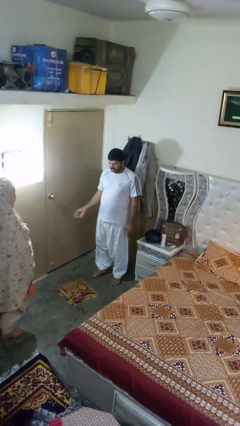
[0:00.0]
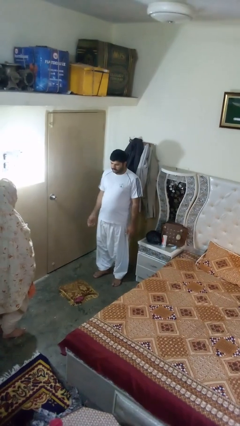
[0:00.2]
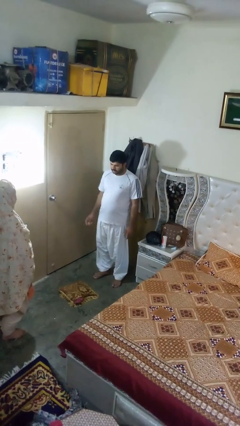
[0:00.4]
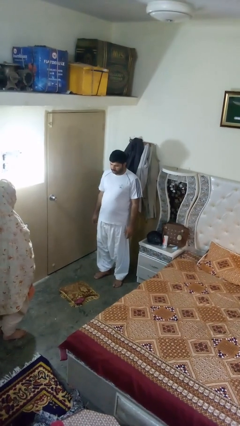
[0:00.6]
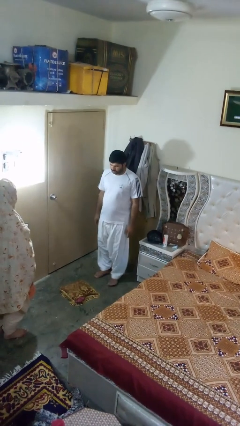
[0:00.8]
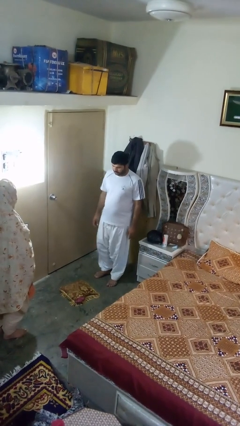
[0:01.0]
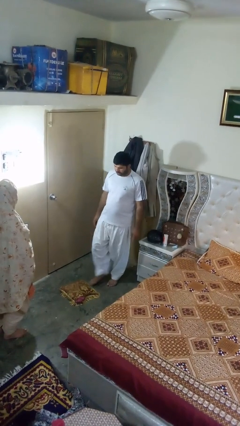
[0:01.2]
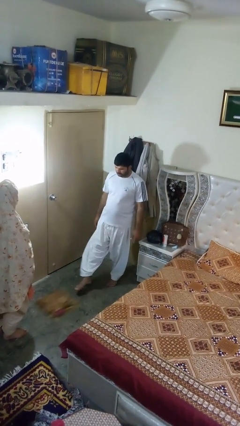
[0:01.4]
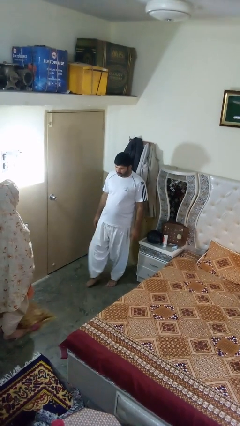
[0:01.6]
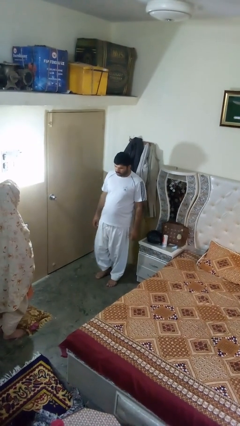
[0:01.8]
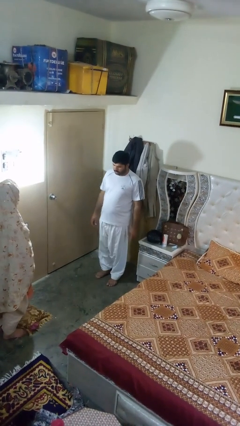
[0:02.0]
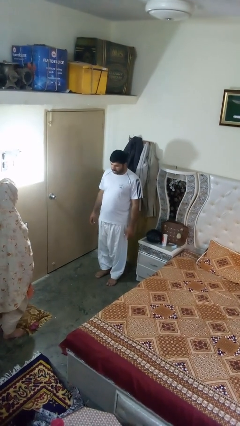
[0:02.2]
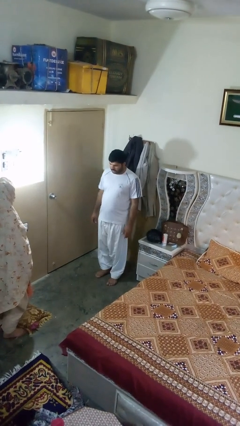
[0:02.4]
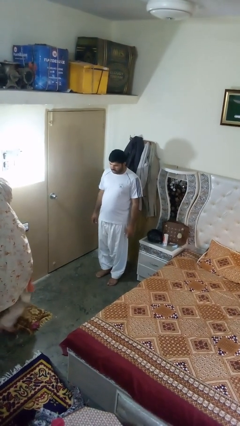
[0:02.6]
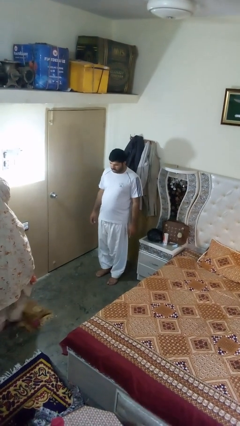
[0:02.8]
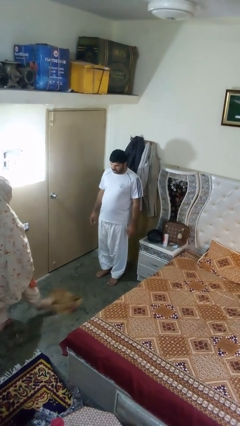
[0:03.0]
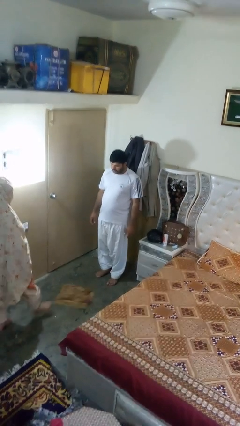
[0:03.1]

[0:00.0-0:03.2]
person kicks object to person

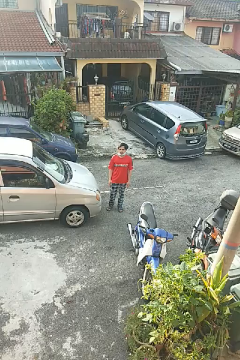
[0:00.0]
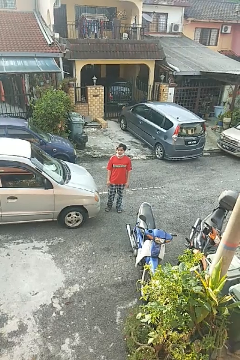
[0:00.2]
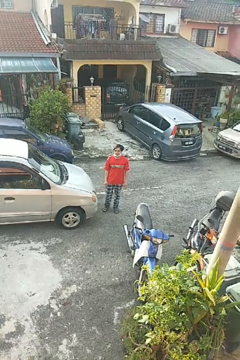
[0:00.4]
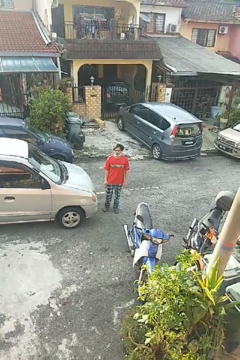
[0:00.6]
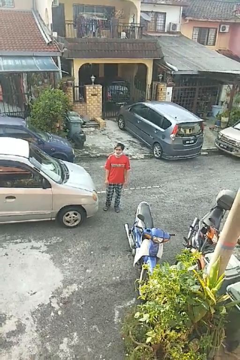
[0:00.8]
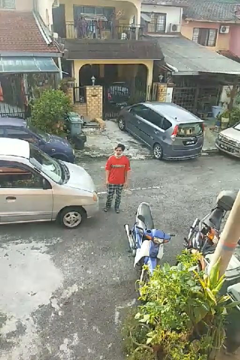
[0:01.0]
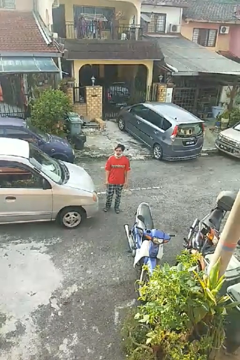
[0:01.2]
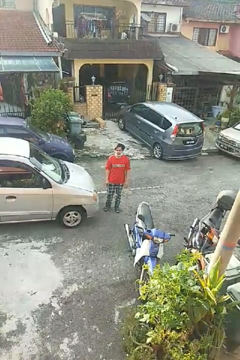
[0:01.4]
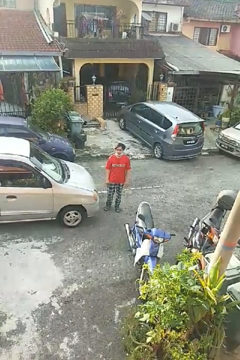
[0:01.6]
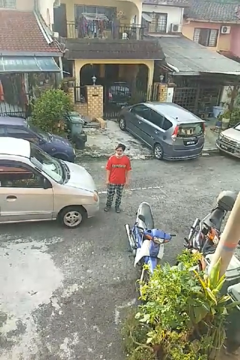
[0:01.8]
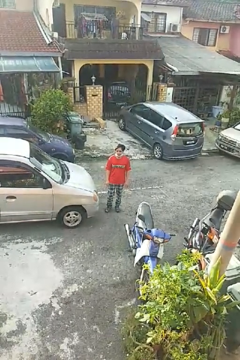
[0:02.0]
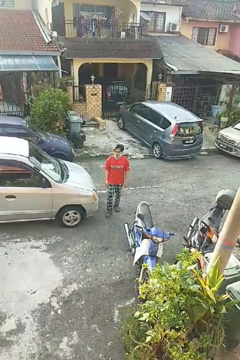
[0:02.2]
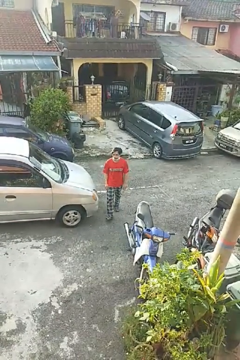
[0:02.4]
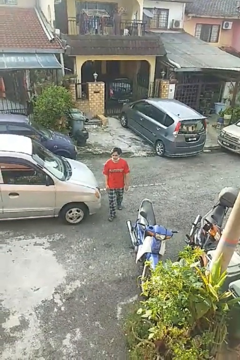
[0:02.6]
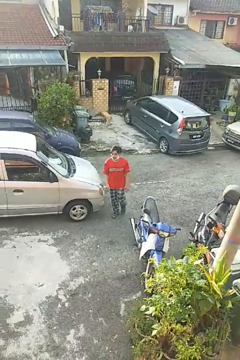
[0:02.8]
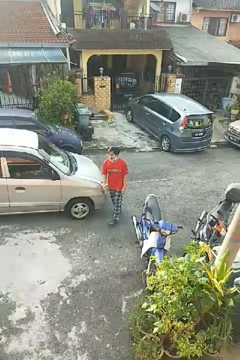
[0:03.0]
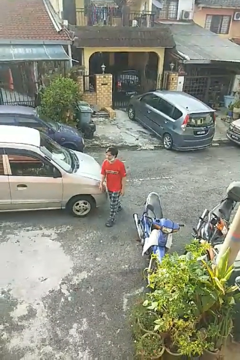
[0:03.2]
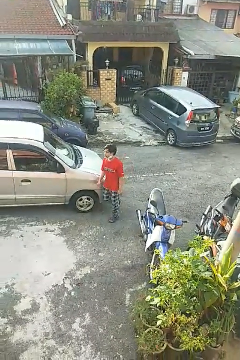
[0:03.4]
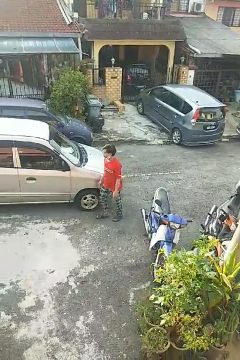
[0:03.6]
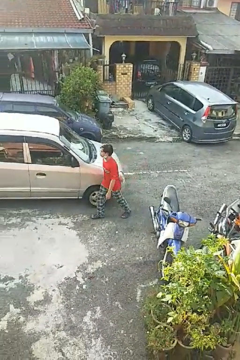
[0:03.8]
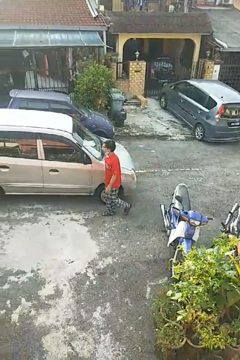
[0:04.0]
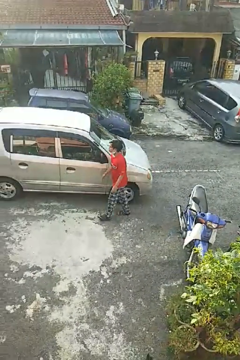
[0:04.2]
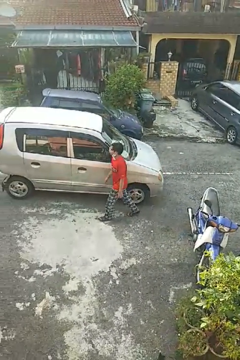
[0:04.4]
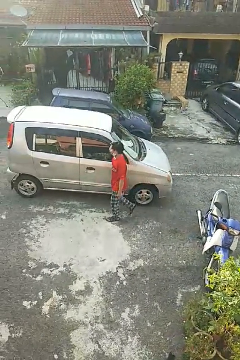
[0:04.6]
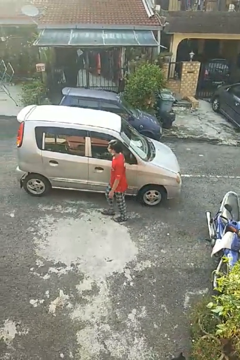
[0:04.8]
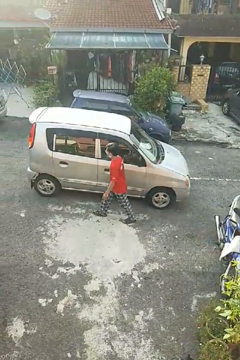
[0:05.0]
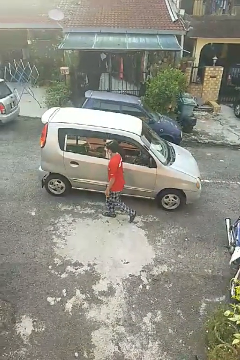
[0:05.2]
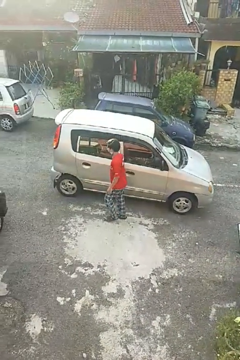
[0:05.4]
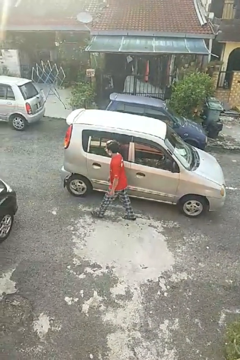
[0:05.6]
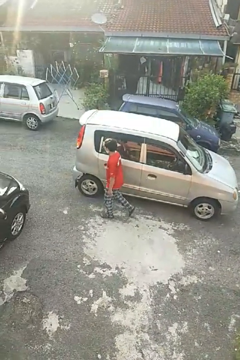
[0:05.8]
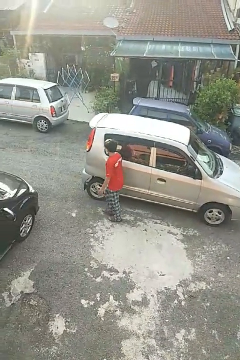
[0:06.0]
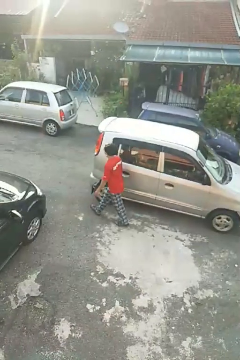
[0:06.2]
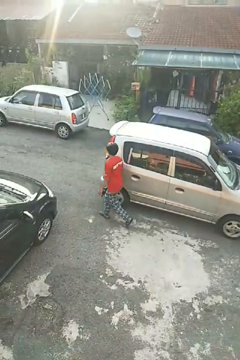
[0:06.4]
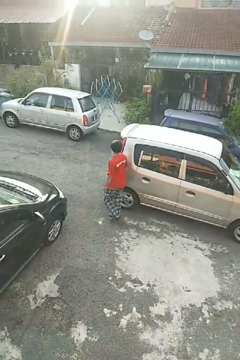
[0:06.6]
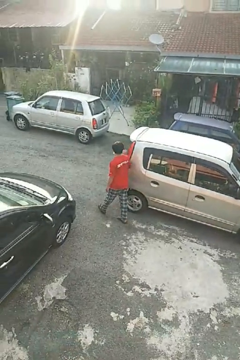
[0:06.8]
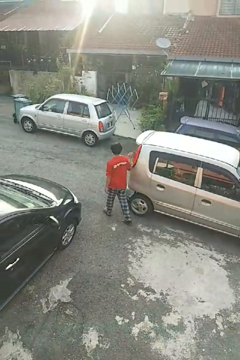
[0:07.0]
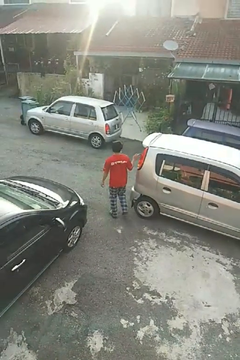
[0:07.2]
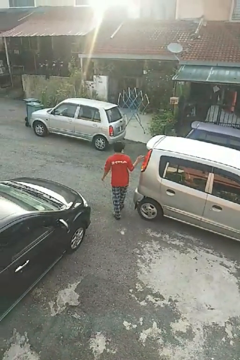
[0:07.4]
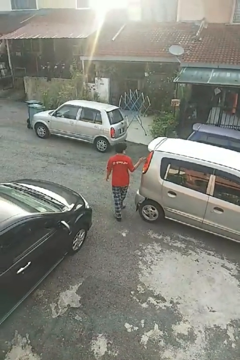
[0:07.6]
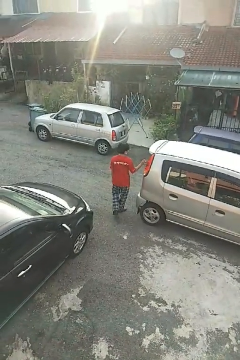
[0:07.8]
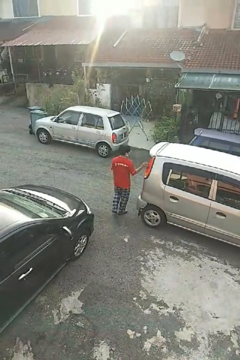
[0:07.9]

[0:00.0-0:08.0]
person walks around car

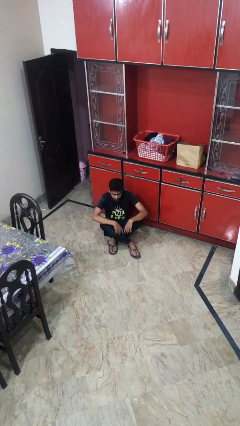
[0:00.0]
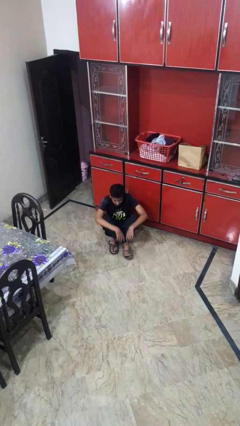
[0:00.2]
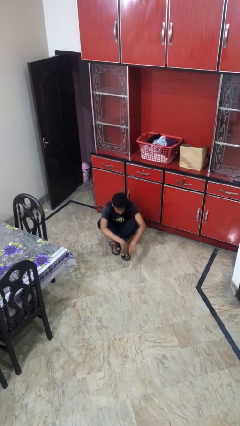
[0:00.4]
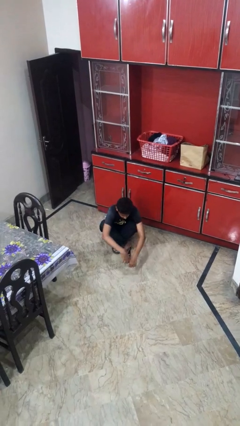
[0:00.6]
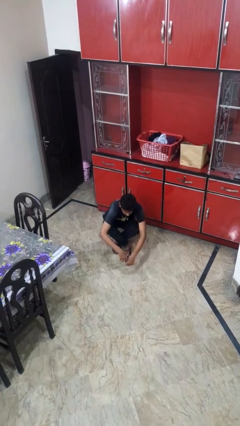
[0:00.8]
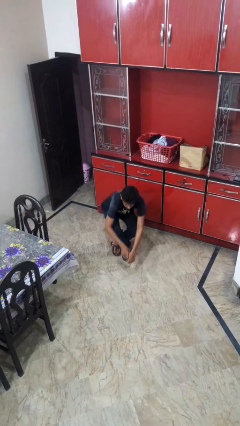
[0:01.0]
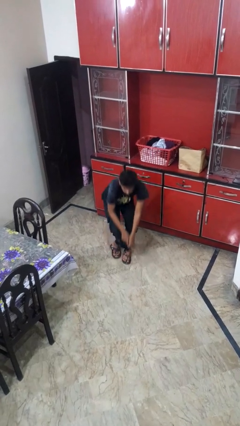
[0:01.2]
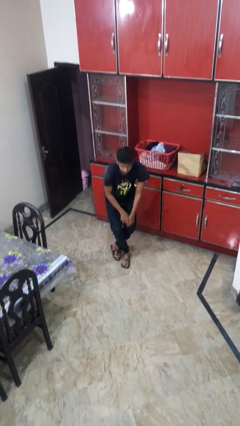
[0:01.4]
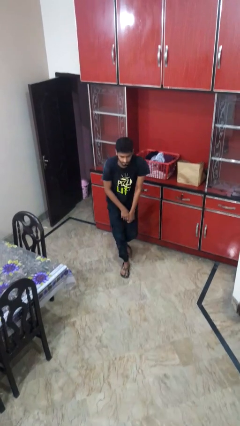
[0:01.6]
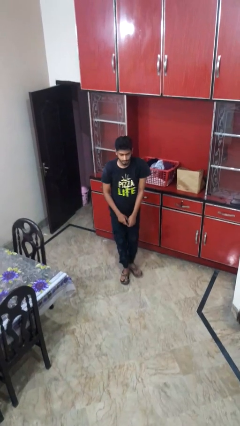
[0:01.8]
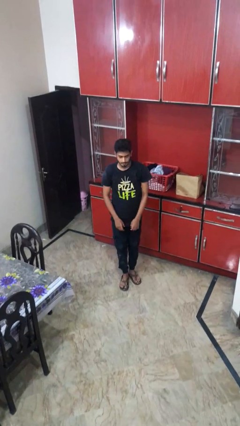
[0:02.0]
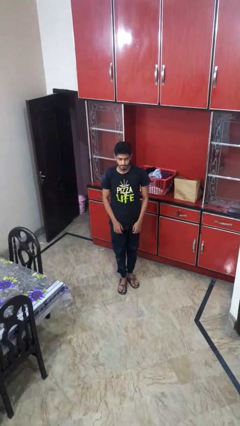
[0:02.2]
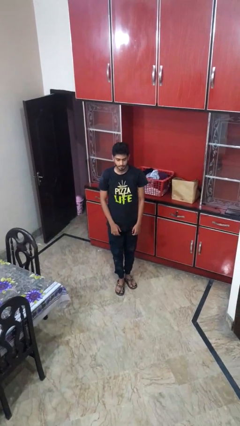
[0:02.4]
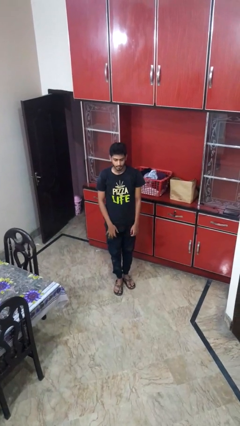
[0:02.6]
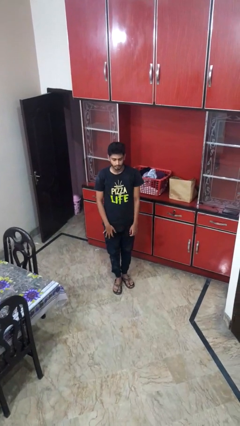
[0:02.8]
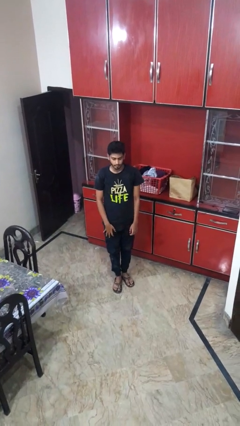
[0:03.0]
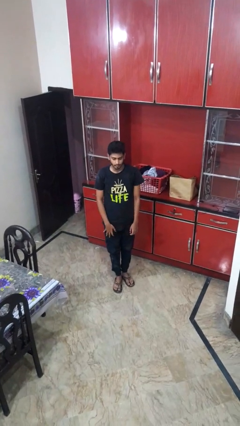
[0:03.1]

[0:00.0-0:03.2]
person stands up from floor

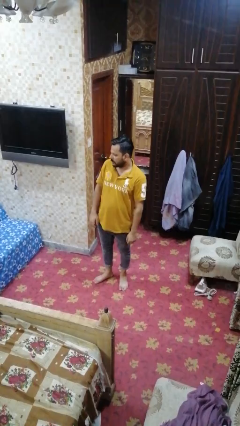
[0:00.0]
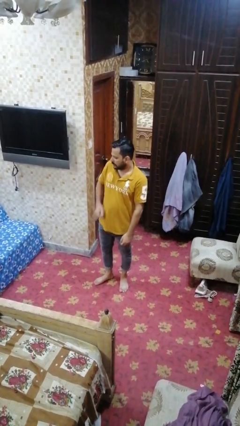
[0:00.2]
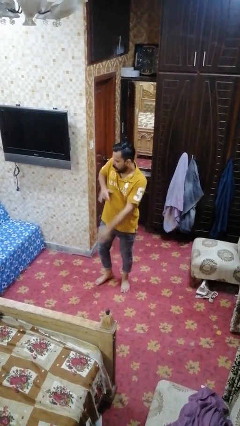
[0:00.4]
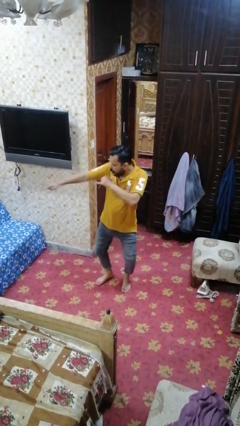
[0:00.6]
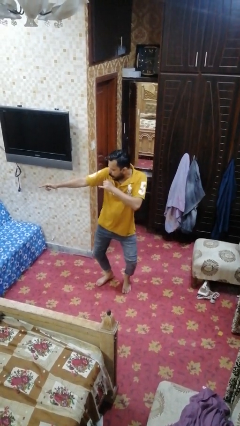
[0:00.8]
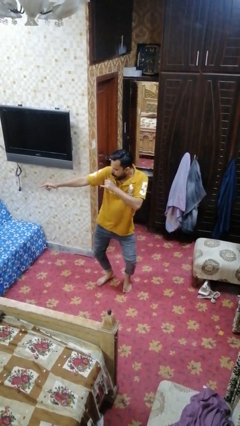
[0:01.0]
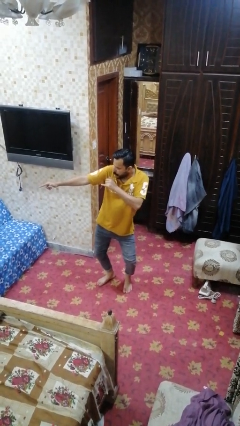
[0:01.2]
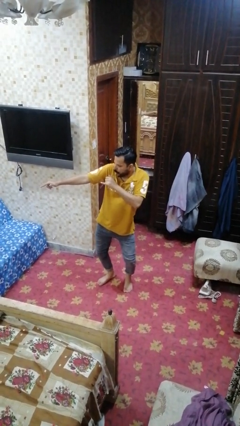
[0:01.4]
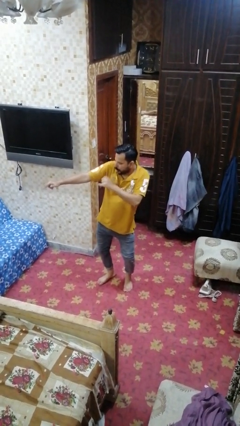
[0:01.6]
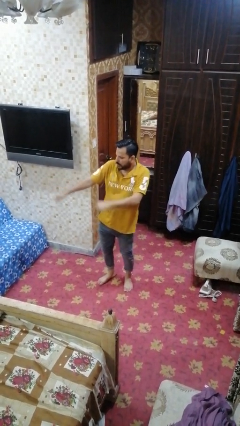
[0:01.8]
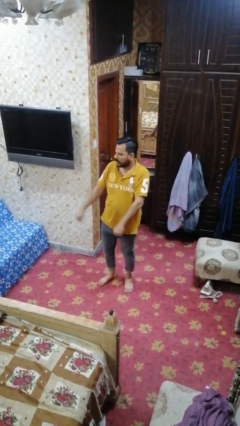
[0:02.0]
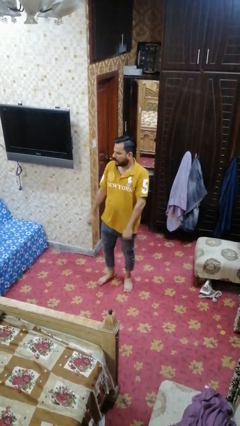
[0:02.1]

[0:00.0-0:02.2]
person karate chop

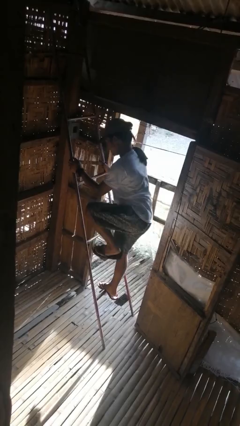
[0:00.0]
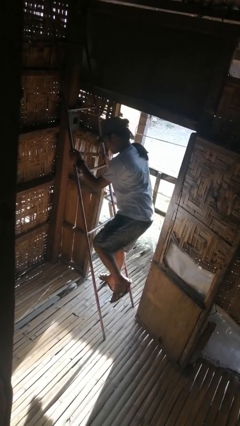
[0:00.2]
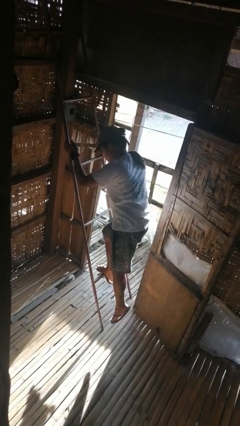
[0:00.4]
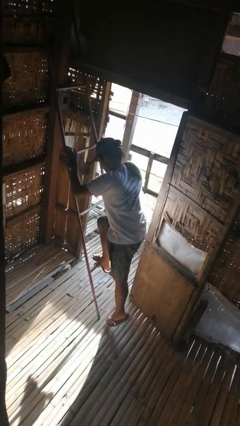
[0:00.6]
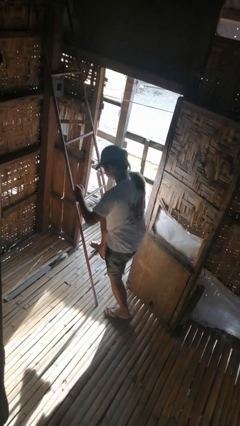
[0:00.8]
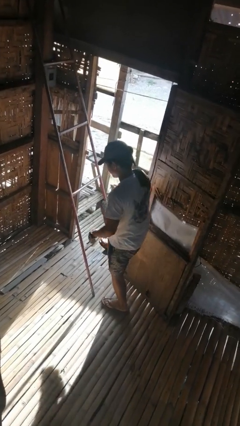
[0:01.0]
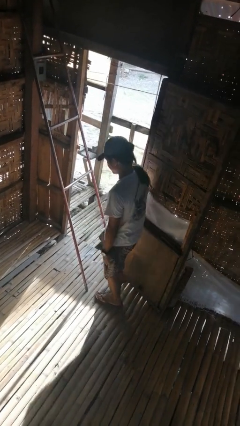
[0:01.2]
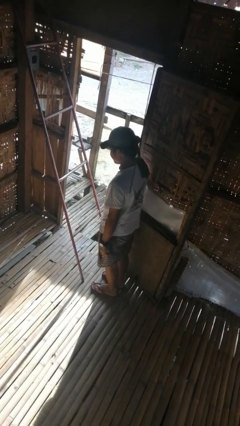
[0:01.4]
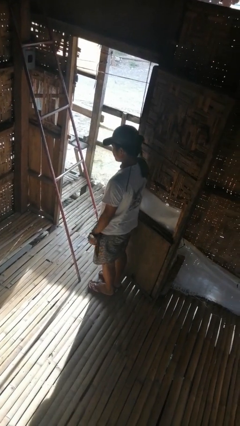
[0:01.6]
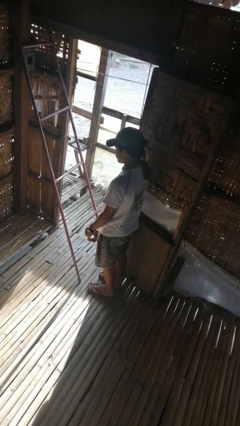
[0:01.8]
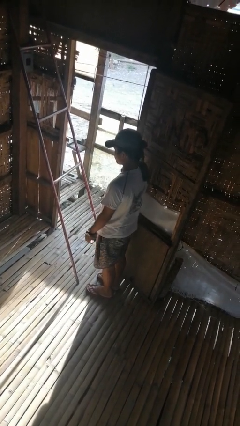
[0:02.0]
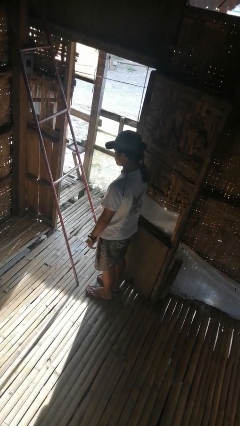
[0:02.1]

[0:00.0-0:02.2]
person climbs down ladder
